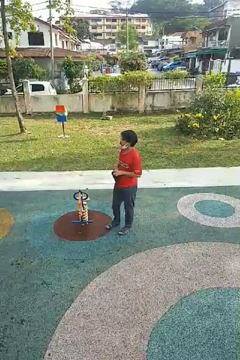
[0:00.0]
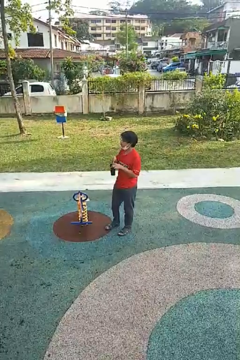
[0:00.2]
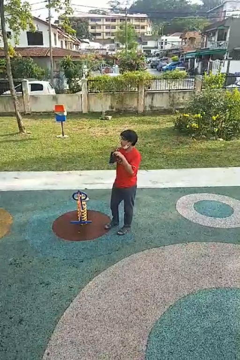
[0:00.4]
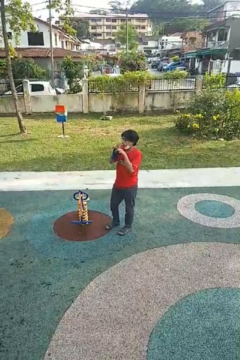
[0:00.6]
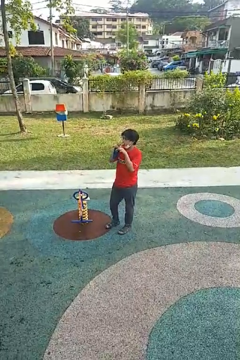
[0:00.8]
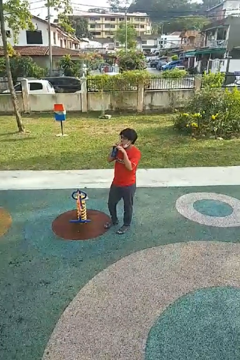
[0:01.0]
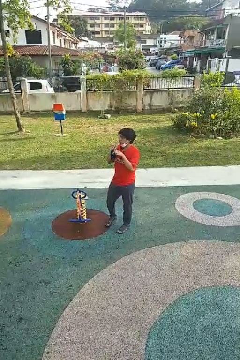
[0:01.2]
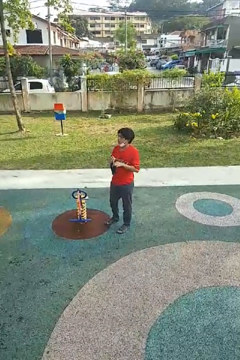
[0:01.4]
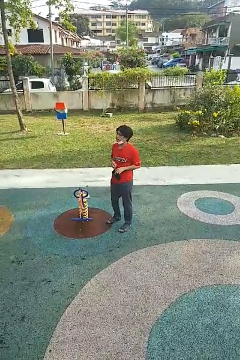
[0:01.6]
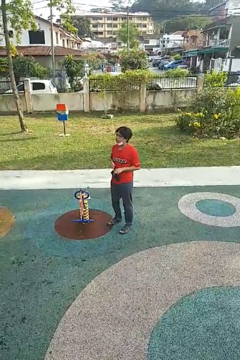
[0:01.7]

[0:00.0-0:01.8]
person drinks from straw

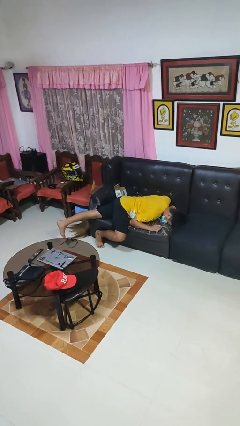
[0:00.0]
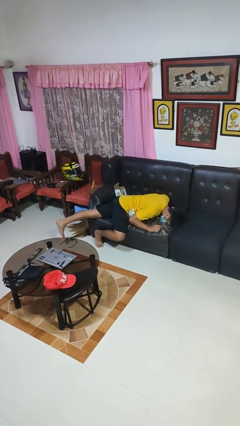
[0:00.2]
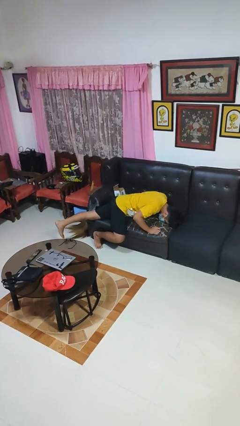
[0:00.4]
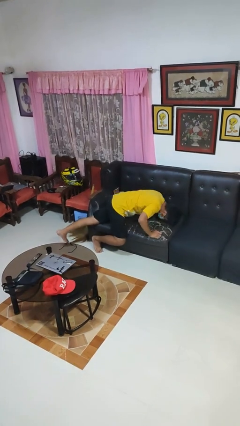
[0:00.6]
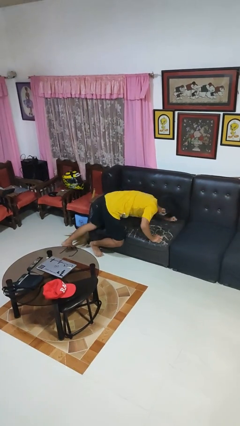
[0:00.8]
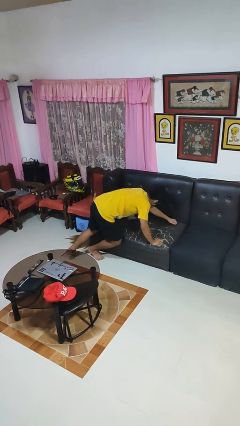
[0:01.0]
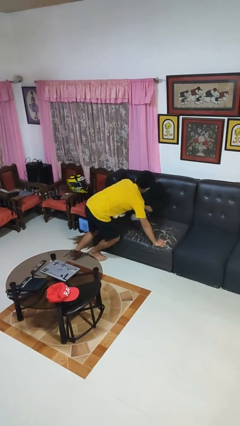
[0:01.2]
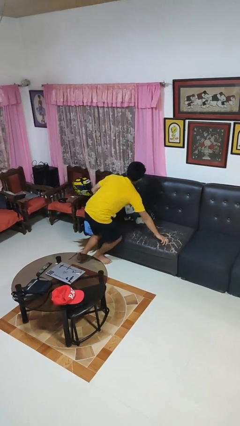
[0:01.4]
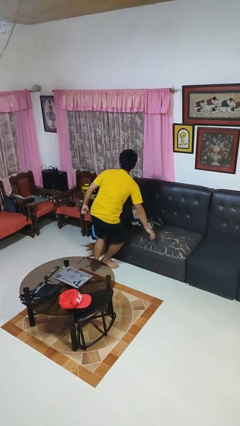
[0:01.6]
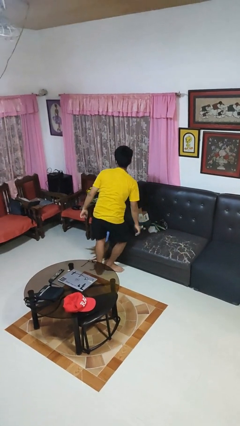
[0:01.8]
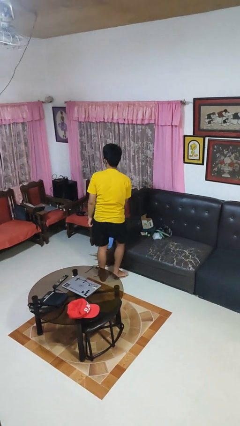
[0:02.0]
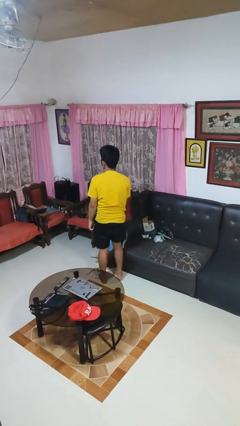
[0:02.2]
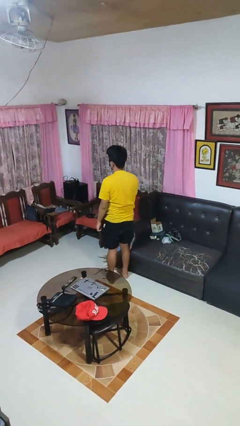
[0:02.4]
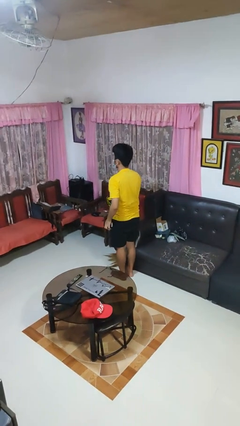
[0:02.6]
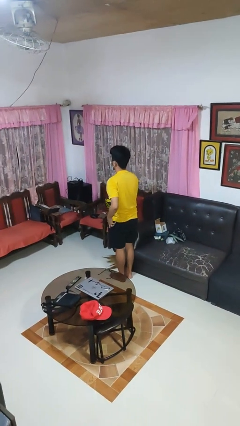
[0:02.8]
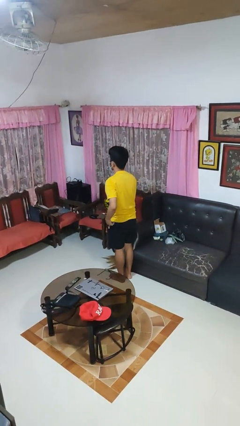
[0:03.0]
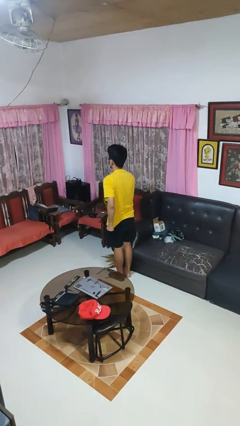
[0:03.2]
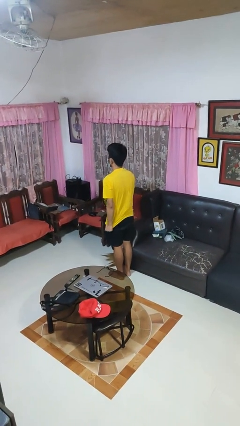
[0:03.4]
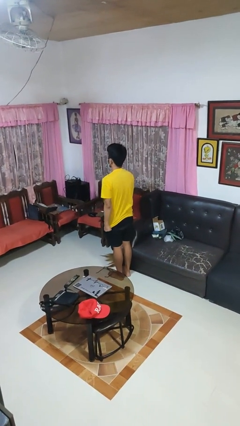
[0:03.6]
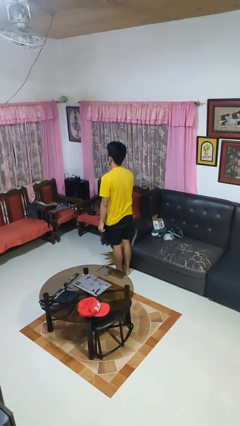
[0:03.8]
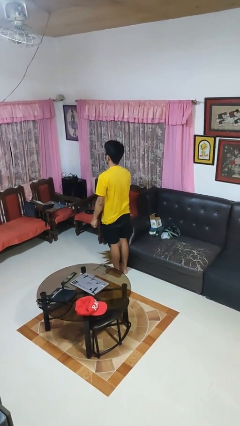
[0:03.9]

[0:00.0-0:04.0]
person stands up

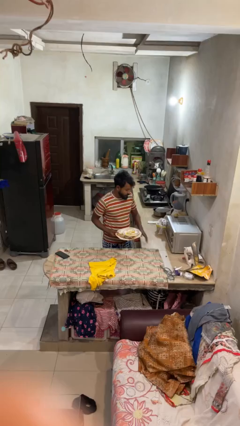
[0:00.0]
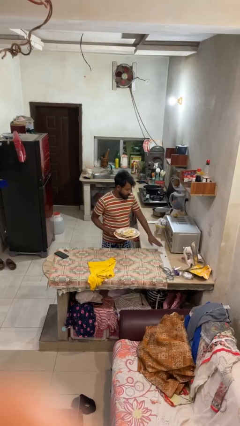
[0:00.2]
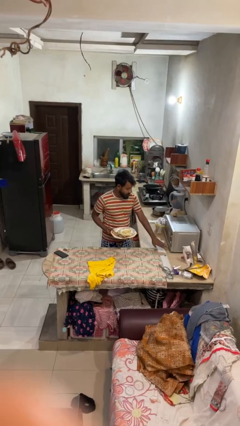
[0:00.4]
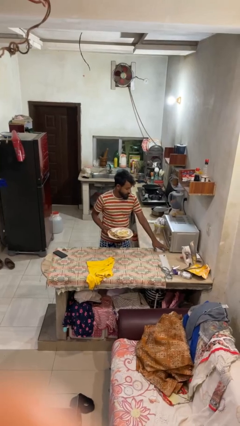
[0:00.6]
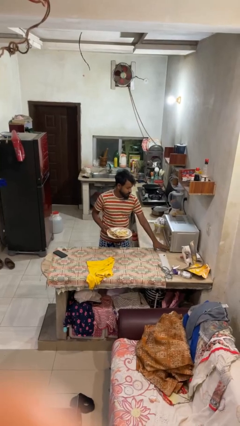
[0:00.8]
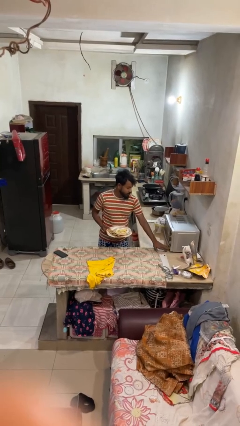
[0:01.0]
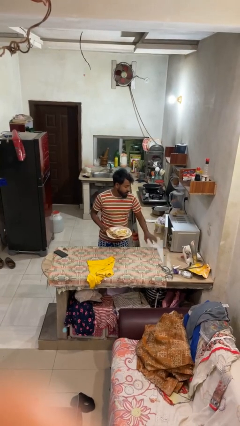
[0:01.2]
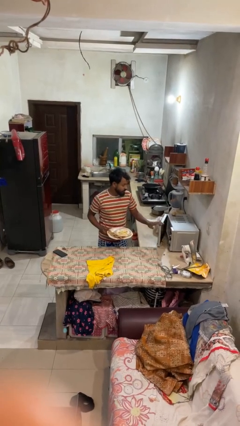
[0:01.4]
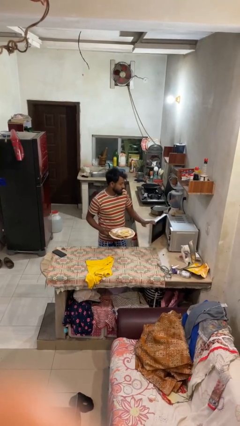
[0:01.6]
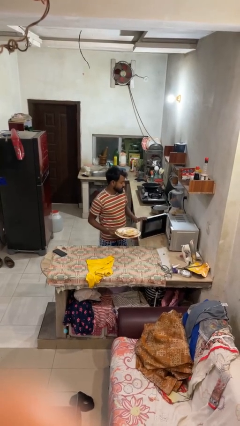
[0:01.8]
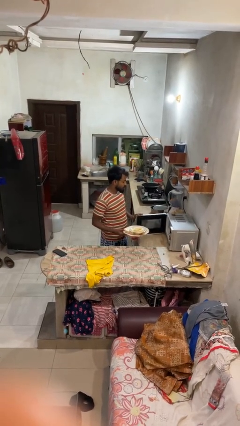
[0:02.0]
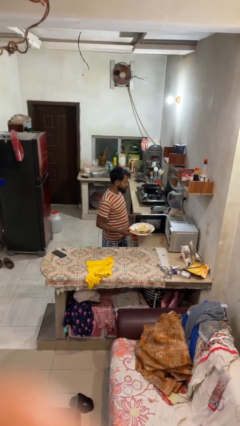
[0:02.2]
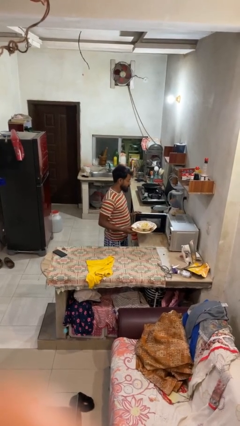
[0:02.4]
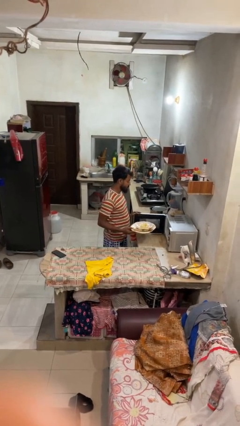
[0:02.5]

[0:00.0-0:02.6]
person opens microwave

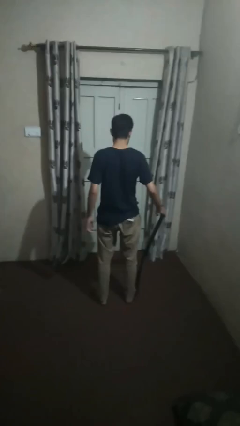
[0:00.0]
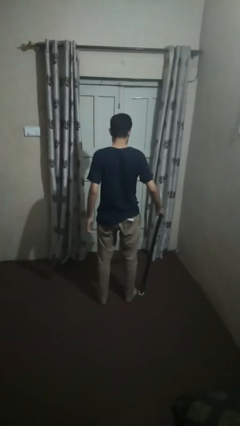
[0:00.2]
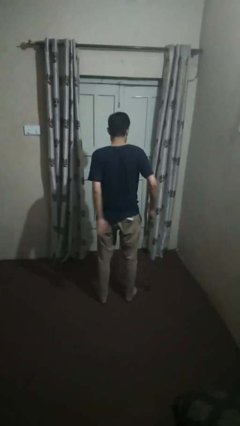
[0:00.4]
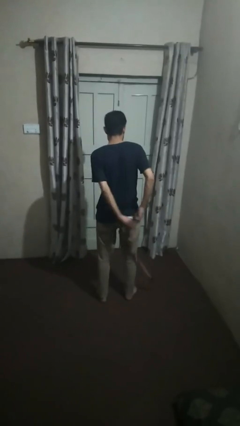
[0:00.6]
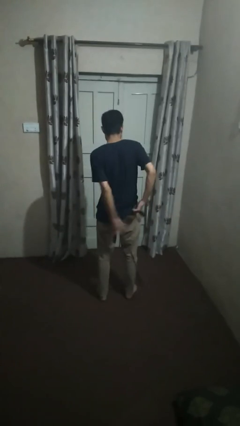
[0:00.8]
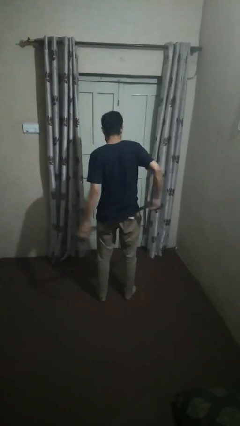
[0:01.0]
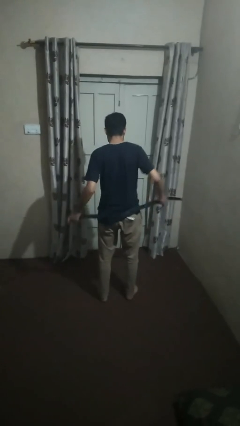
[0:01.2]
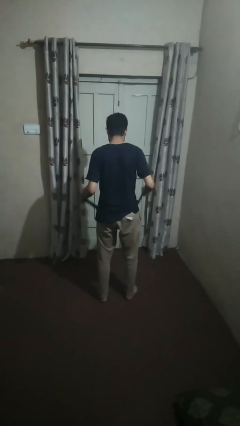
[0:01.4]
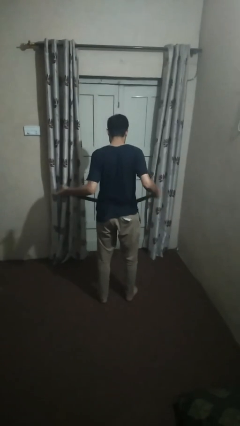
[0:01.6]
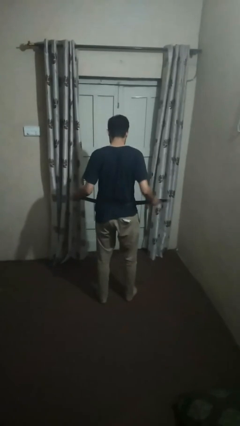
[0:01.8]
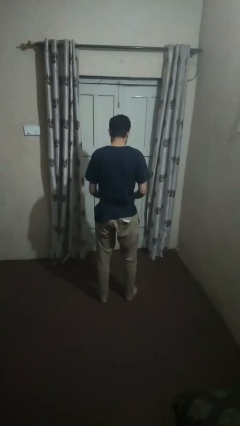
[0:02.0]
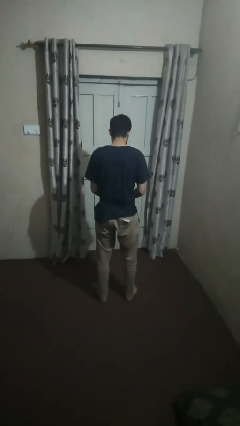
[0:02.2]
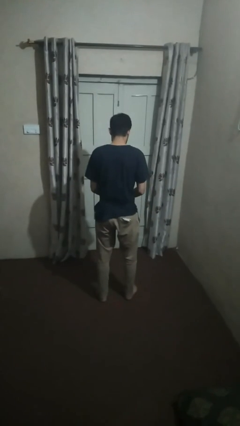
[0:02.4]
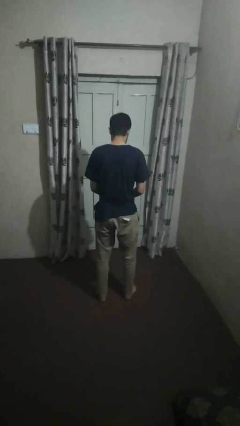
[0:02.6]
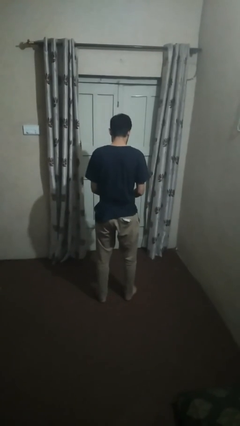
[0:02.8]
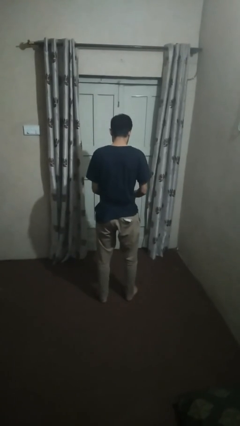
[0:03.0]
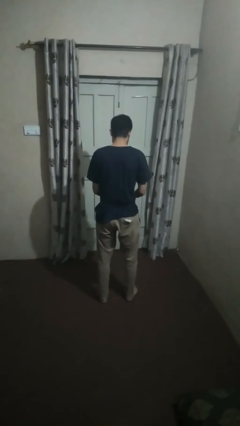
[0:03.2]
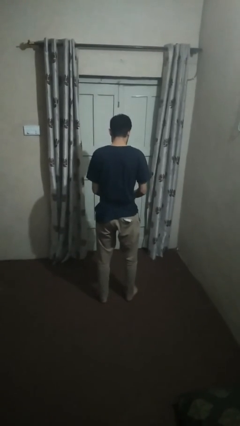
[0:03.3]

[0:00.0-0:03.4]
person puts on belt

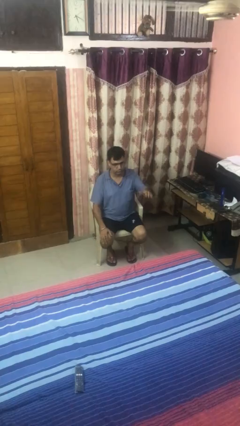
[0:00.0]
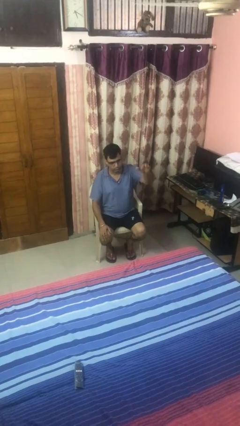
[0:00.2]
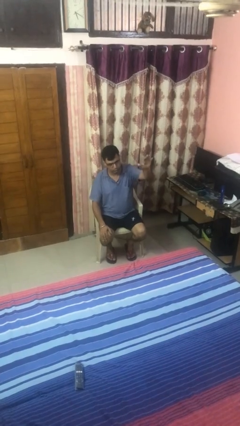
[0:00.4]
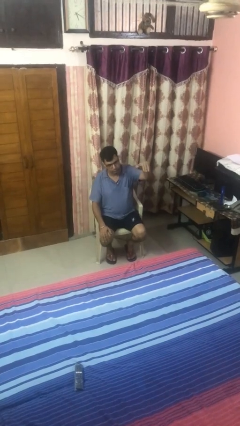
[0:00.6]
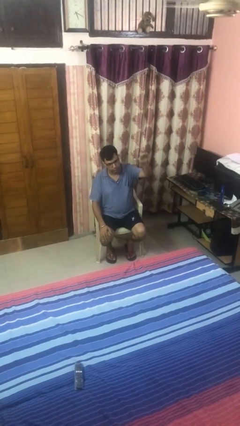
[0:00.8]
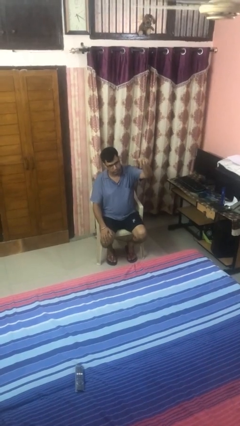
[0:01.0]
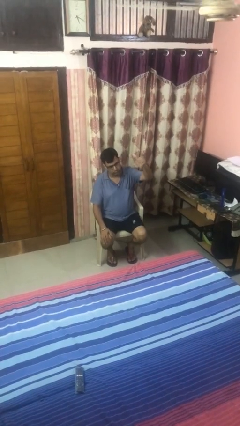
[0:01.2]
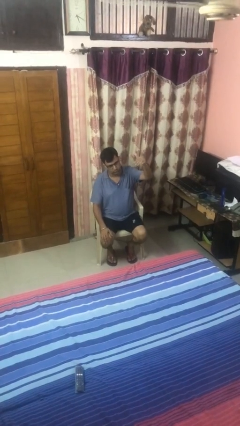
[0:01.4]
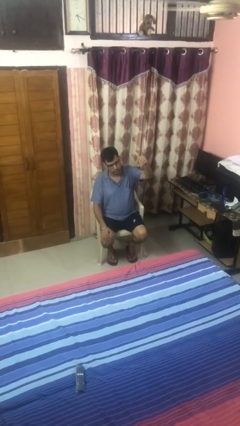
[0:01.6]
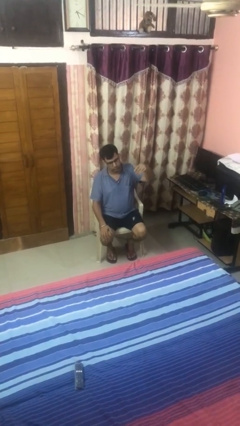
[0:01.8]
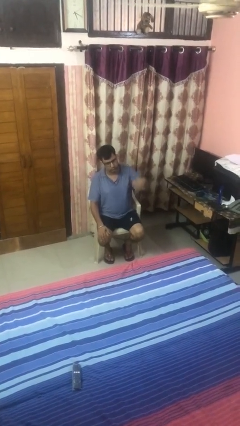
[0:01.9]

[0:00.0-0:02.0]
person gestures come here

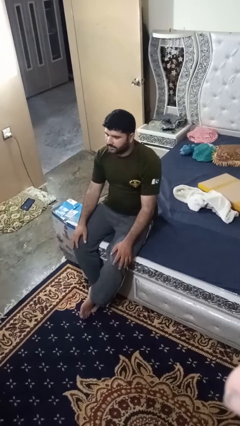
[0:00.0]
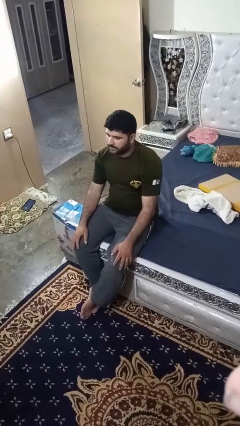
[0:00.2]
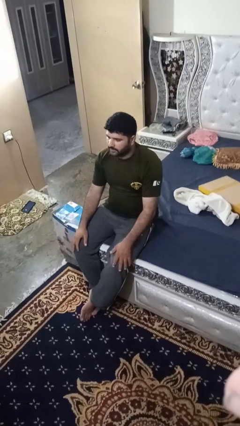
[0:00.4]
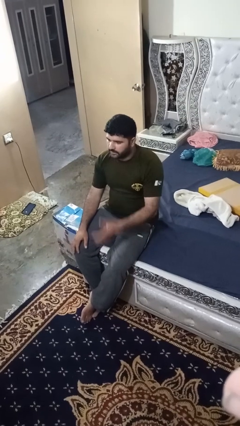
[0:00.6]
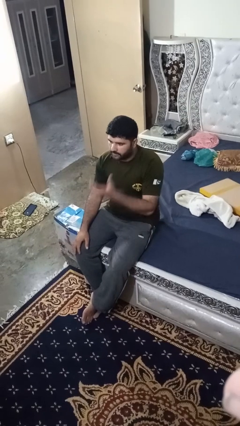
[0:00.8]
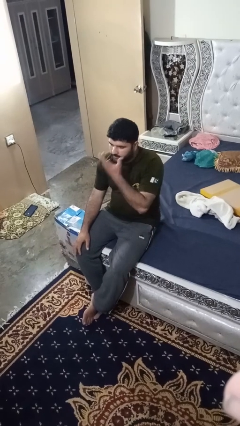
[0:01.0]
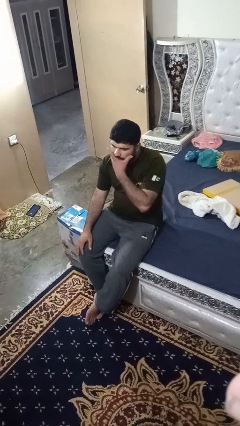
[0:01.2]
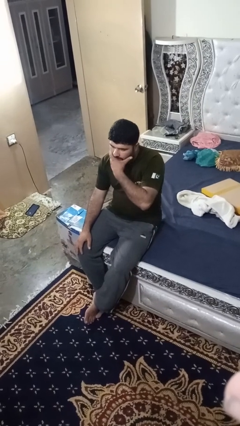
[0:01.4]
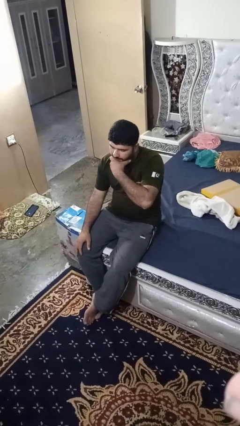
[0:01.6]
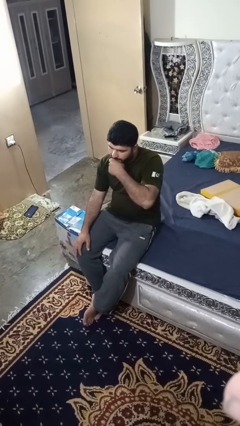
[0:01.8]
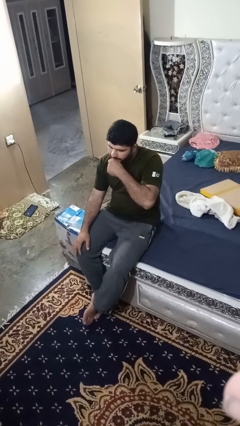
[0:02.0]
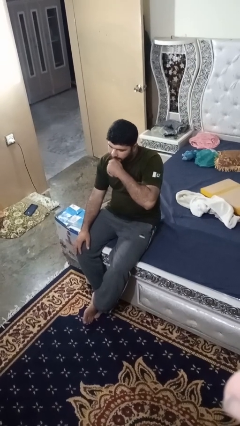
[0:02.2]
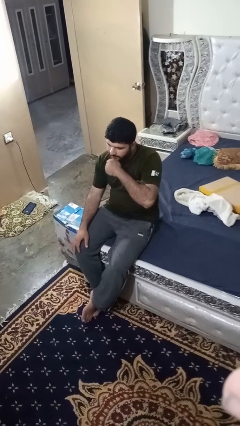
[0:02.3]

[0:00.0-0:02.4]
person strokes chin

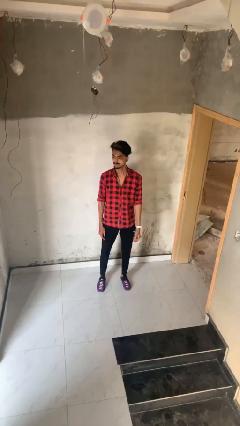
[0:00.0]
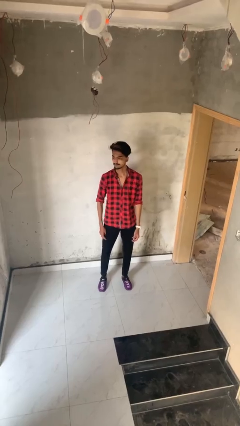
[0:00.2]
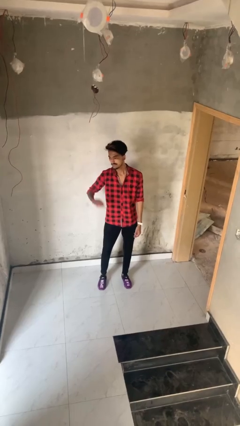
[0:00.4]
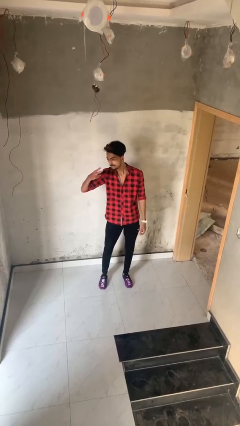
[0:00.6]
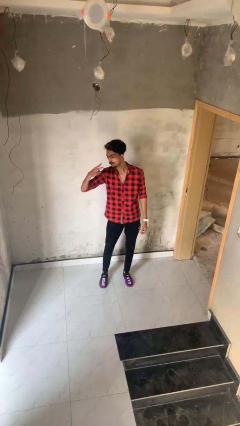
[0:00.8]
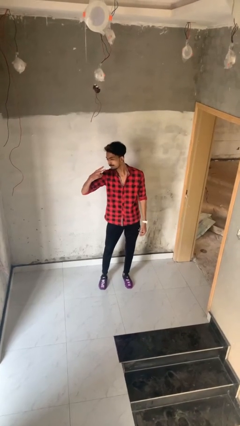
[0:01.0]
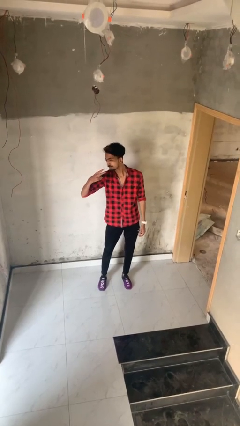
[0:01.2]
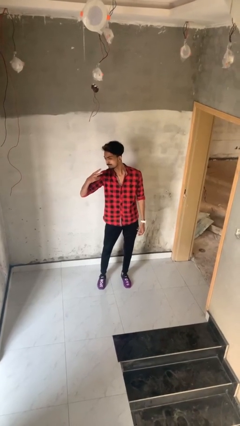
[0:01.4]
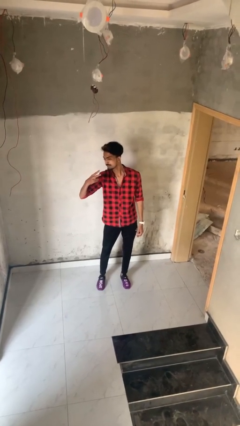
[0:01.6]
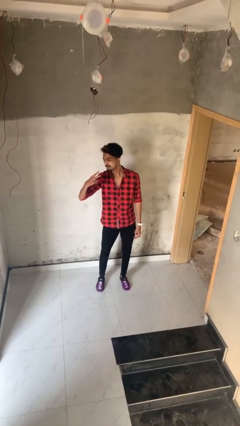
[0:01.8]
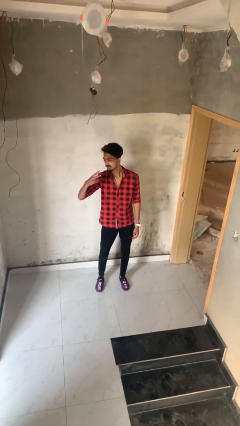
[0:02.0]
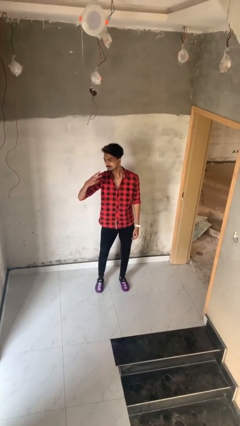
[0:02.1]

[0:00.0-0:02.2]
person gestures peace
